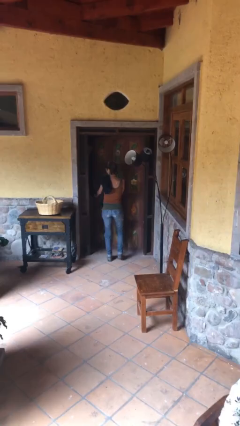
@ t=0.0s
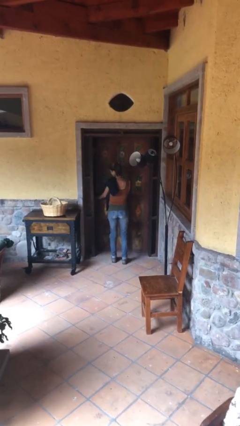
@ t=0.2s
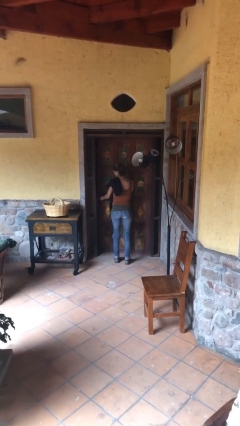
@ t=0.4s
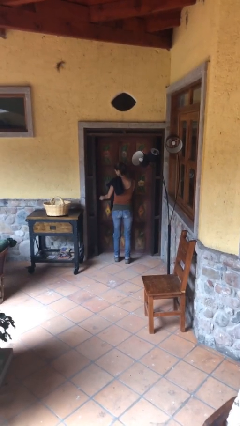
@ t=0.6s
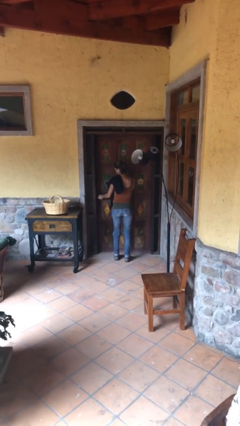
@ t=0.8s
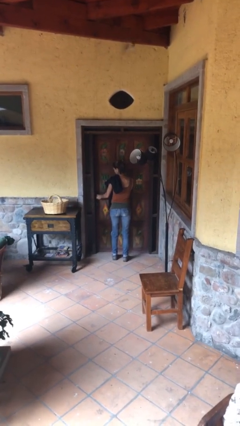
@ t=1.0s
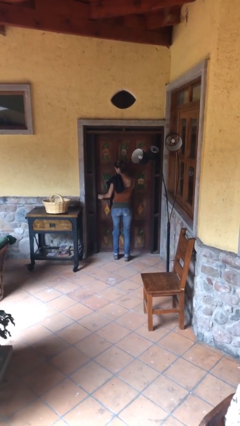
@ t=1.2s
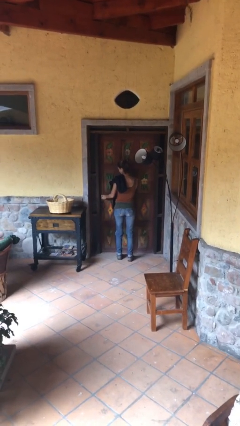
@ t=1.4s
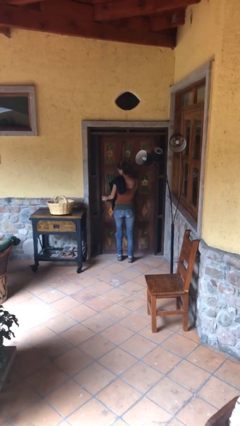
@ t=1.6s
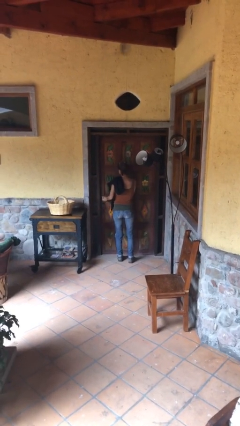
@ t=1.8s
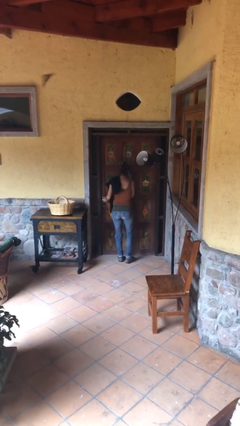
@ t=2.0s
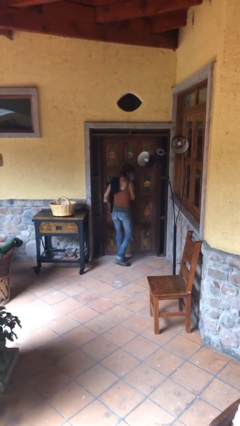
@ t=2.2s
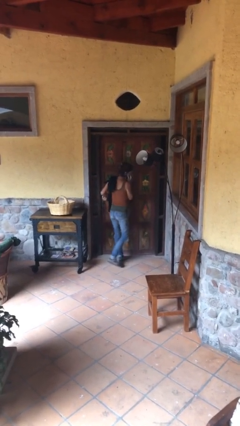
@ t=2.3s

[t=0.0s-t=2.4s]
person closes facility door

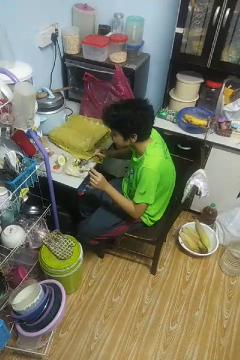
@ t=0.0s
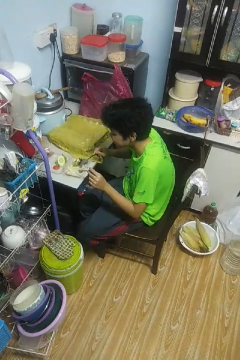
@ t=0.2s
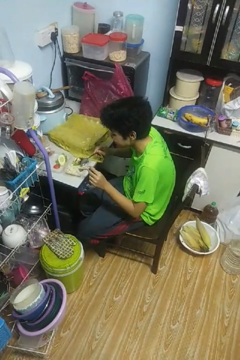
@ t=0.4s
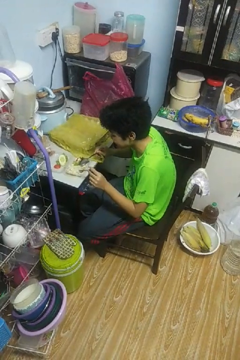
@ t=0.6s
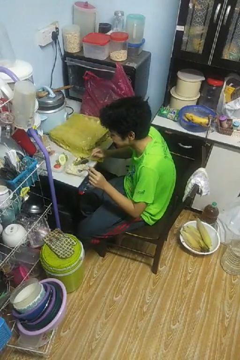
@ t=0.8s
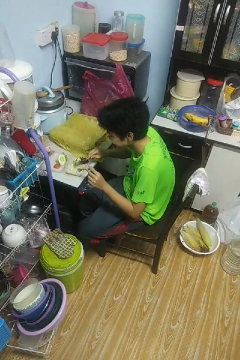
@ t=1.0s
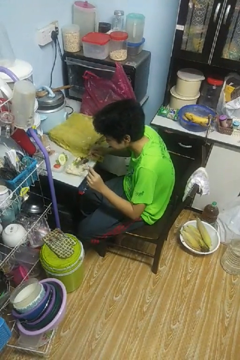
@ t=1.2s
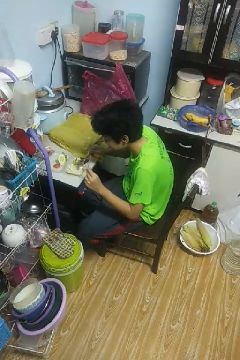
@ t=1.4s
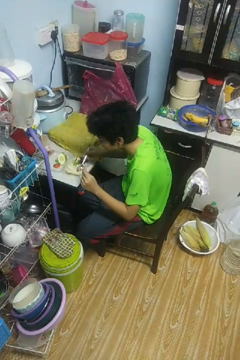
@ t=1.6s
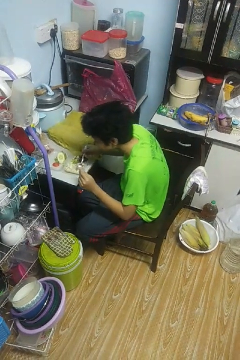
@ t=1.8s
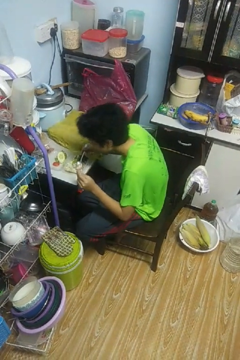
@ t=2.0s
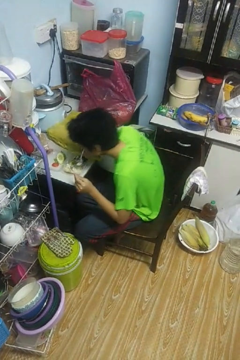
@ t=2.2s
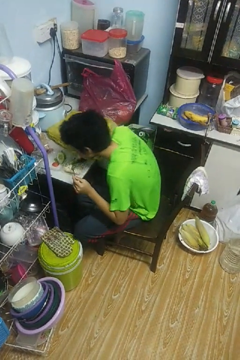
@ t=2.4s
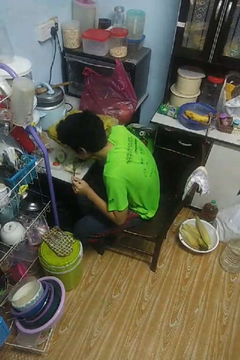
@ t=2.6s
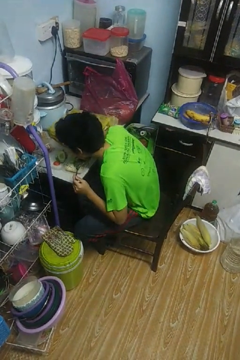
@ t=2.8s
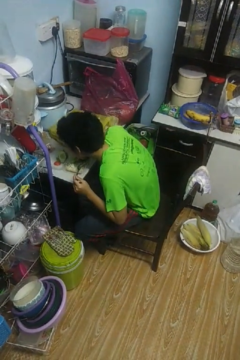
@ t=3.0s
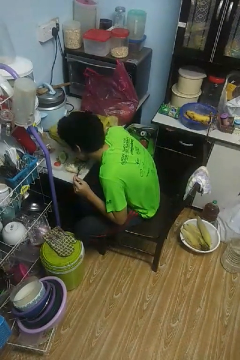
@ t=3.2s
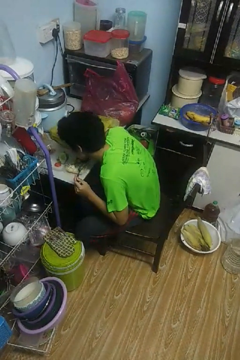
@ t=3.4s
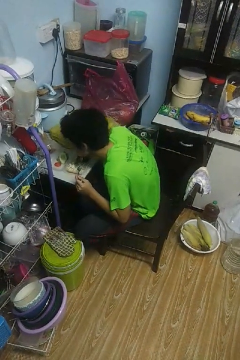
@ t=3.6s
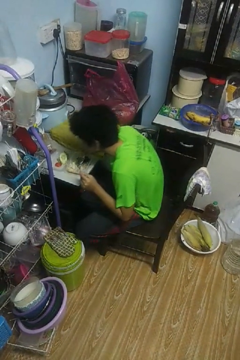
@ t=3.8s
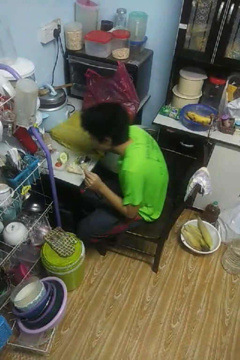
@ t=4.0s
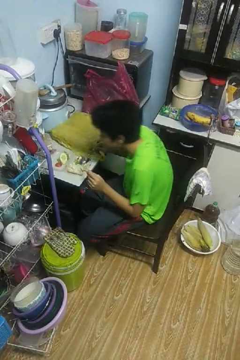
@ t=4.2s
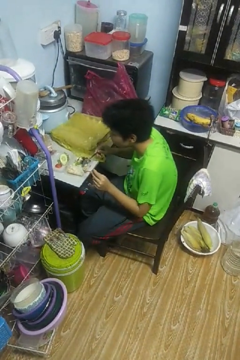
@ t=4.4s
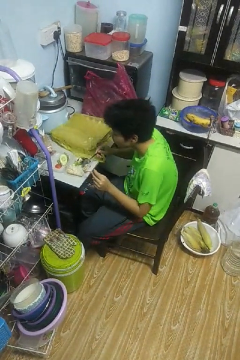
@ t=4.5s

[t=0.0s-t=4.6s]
person eats with utensil

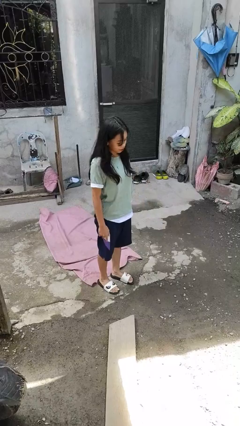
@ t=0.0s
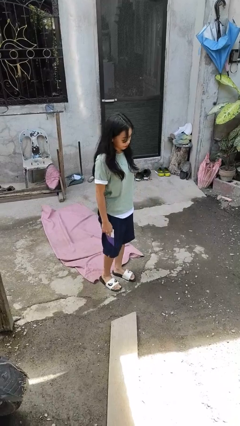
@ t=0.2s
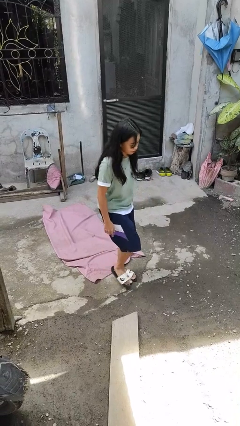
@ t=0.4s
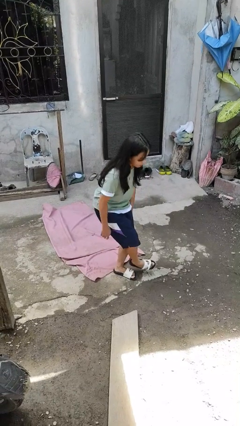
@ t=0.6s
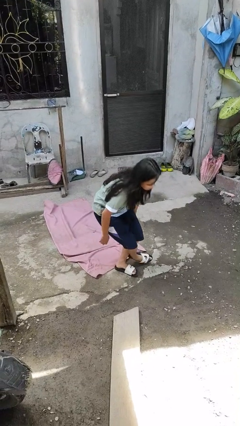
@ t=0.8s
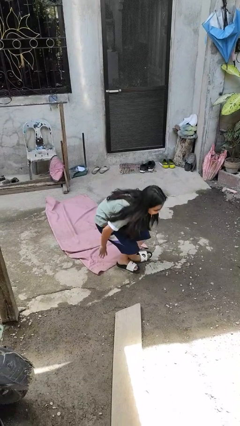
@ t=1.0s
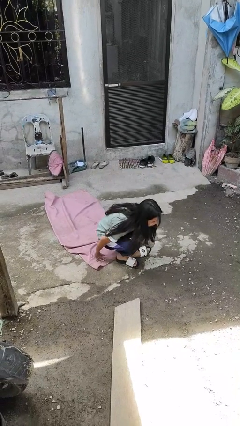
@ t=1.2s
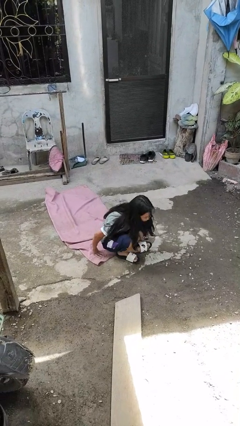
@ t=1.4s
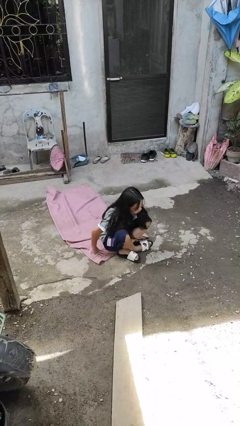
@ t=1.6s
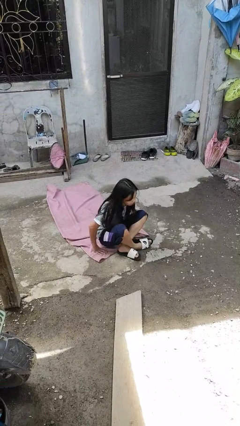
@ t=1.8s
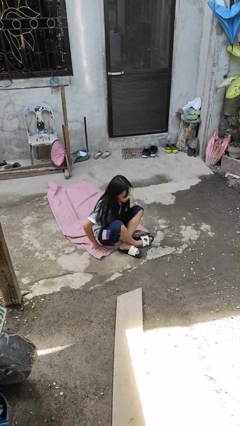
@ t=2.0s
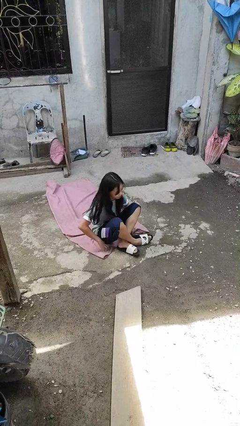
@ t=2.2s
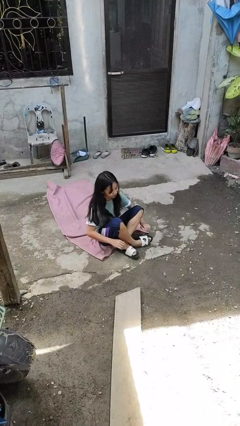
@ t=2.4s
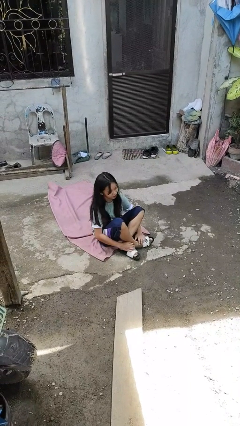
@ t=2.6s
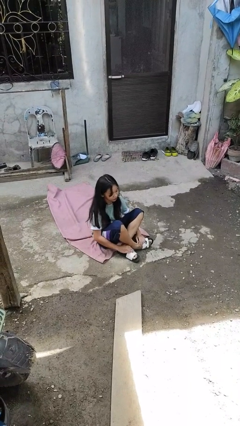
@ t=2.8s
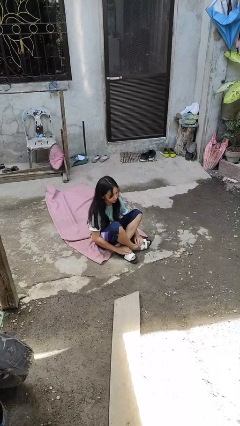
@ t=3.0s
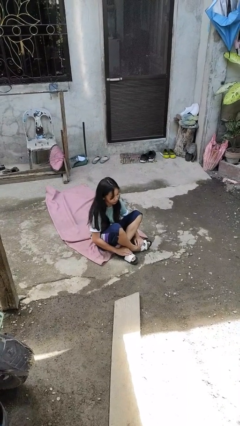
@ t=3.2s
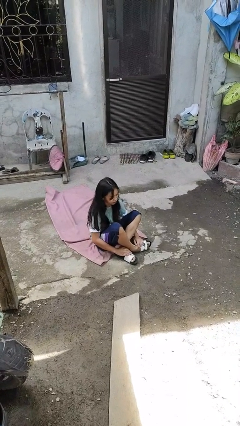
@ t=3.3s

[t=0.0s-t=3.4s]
person sits crisscross

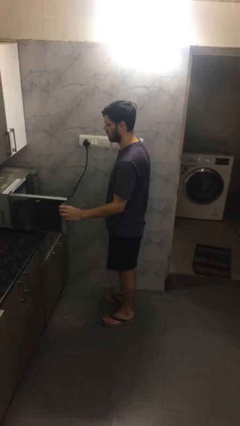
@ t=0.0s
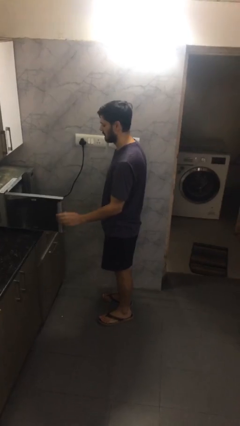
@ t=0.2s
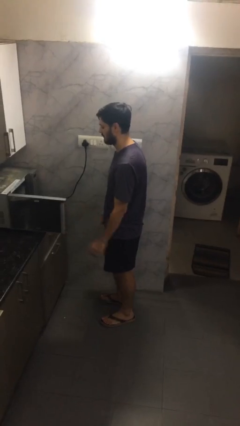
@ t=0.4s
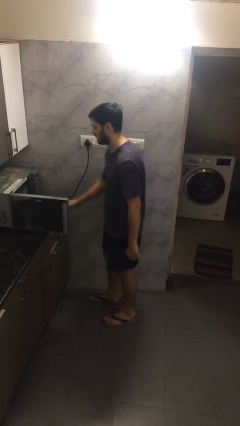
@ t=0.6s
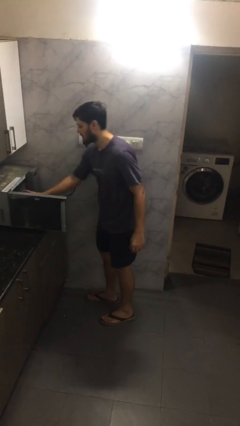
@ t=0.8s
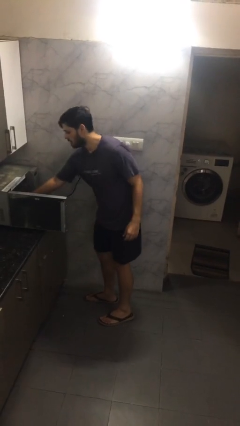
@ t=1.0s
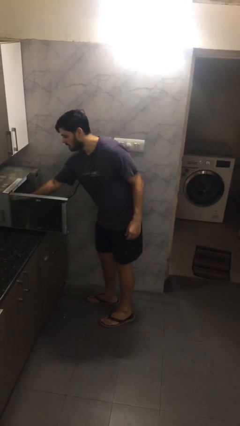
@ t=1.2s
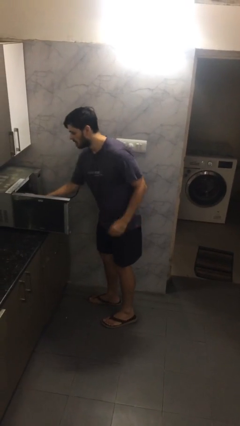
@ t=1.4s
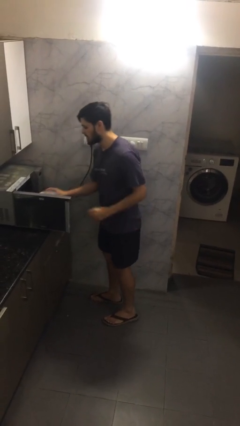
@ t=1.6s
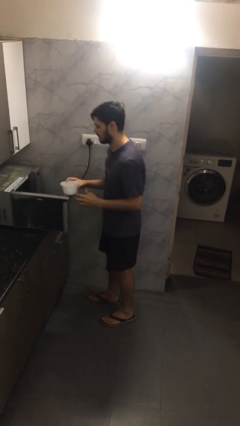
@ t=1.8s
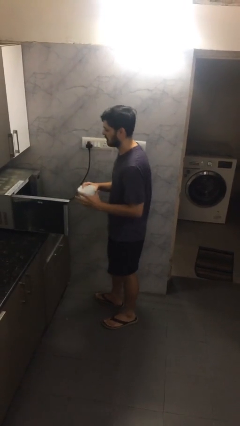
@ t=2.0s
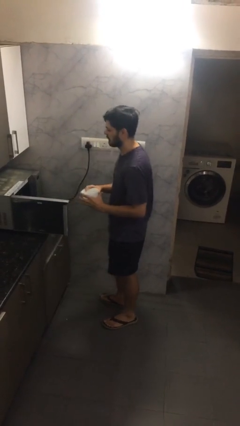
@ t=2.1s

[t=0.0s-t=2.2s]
person takes object from microwave

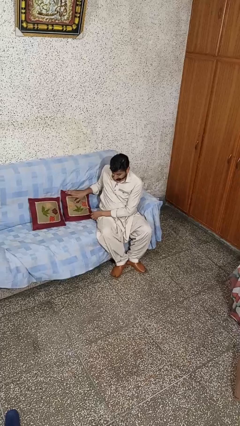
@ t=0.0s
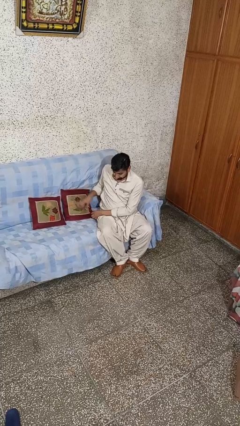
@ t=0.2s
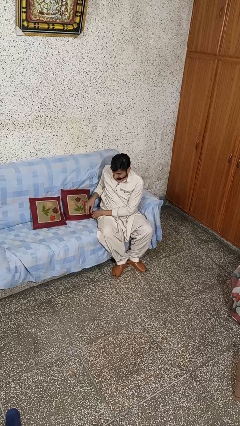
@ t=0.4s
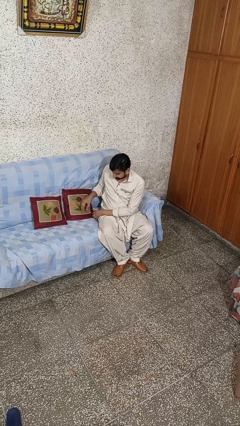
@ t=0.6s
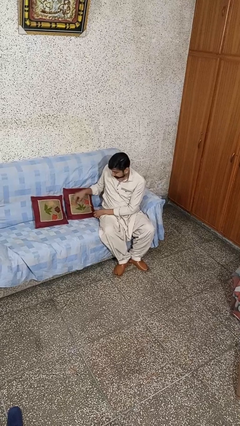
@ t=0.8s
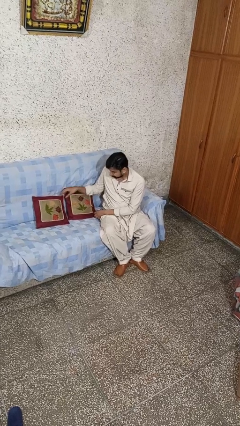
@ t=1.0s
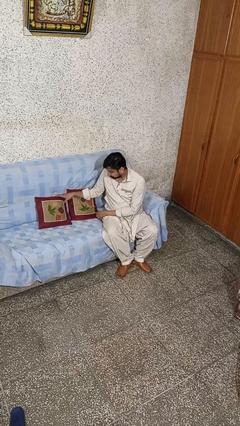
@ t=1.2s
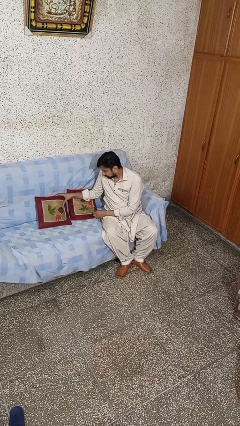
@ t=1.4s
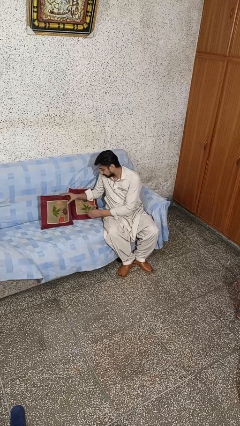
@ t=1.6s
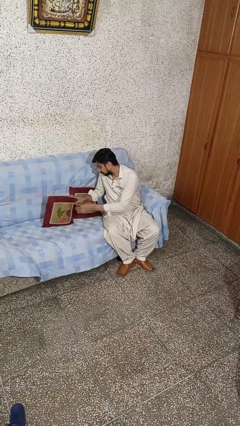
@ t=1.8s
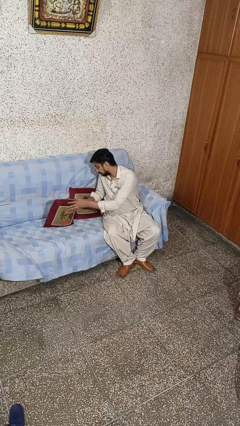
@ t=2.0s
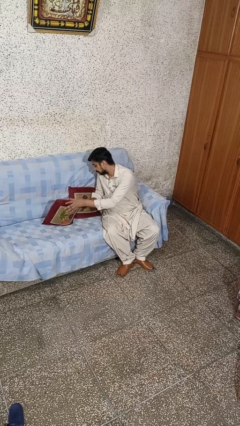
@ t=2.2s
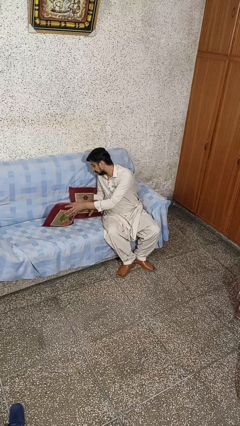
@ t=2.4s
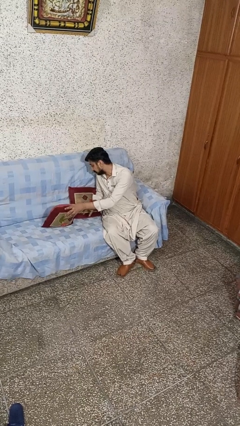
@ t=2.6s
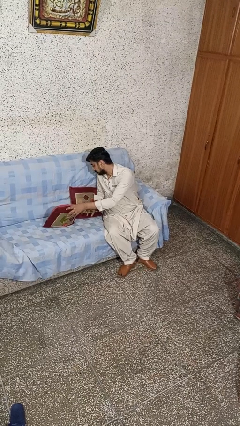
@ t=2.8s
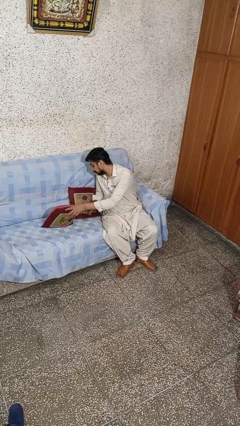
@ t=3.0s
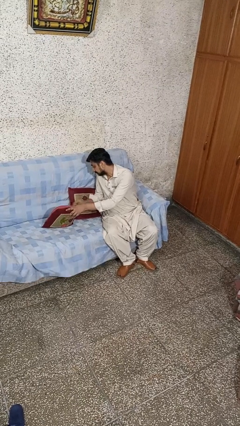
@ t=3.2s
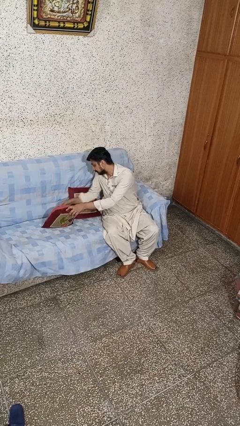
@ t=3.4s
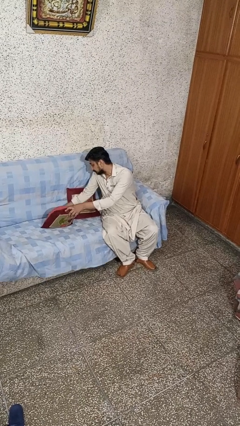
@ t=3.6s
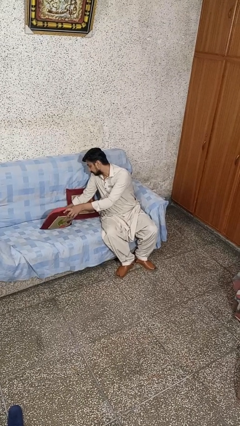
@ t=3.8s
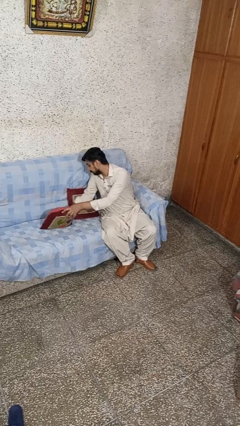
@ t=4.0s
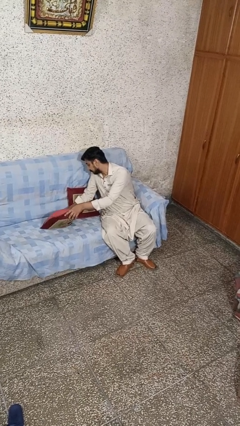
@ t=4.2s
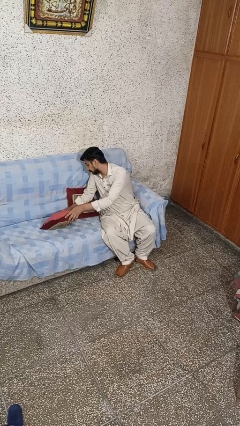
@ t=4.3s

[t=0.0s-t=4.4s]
person searches in couch

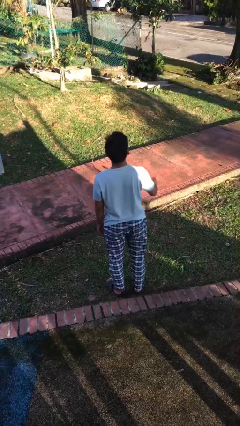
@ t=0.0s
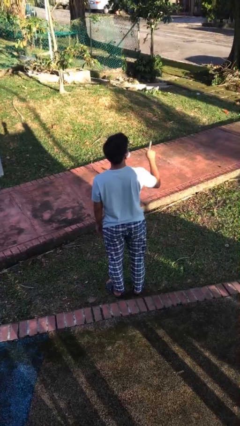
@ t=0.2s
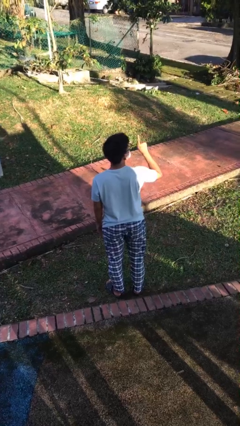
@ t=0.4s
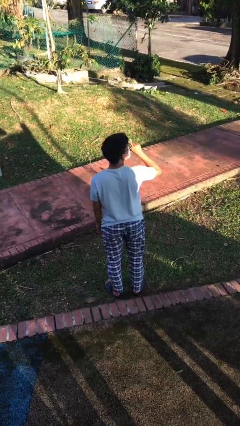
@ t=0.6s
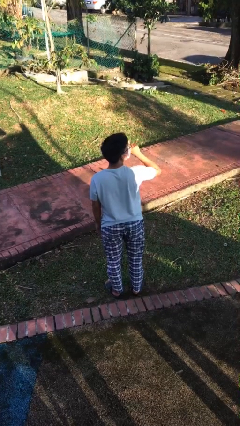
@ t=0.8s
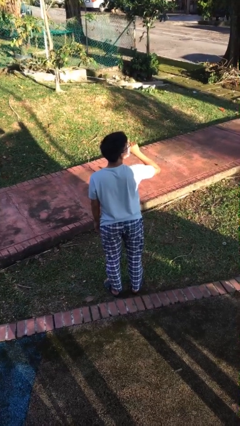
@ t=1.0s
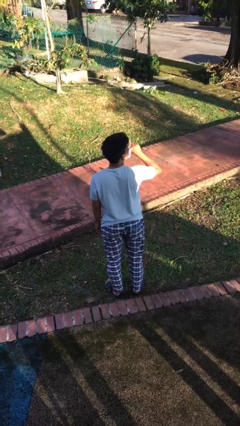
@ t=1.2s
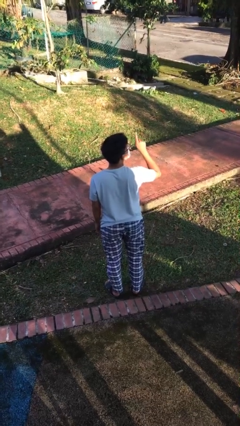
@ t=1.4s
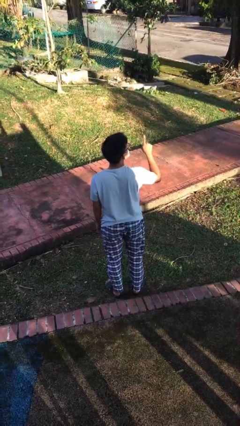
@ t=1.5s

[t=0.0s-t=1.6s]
person gestures be quiet
